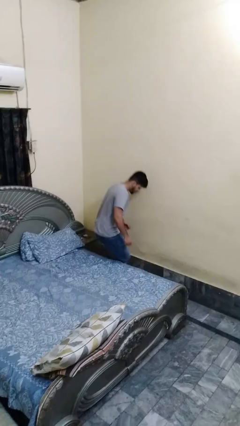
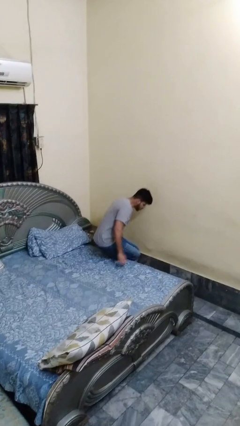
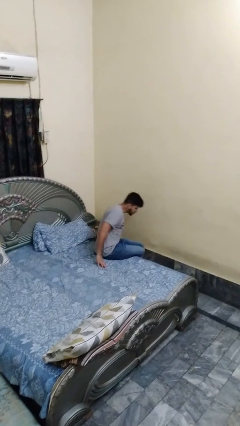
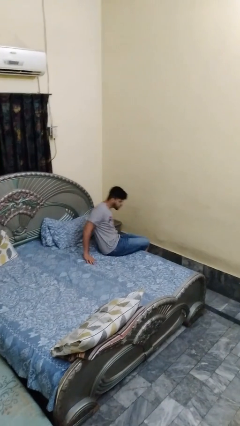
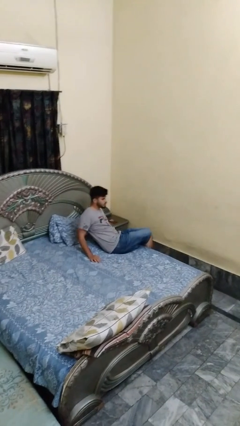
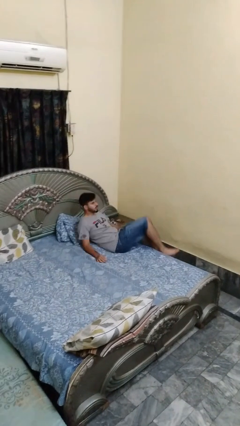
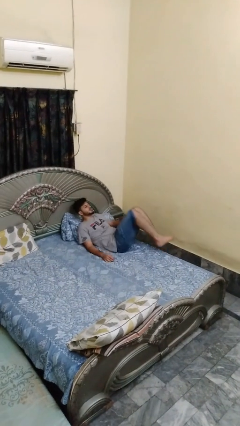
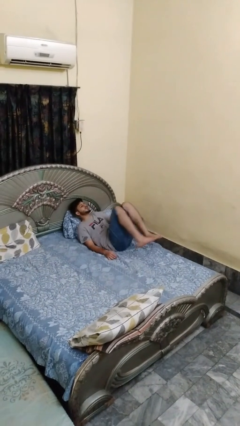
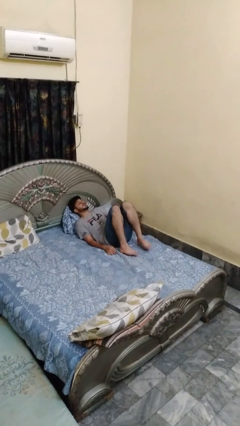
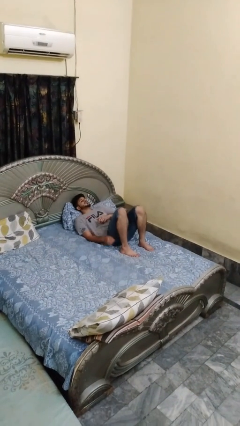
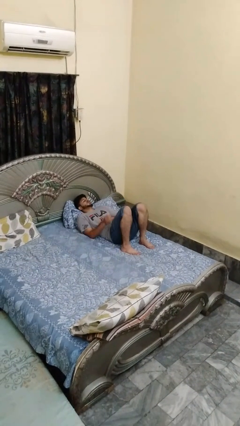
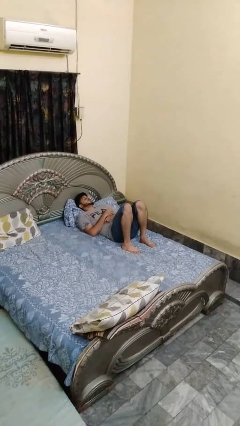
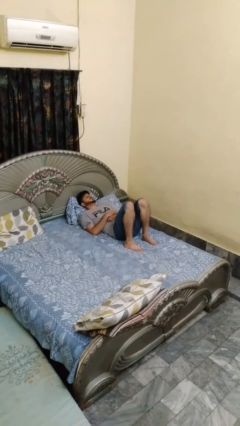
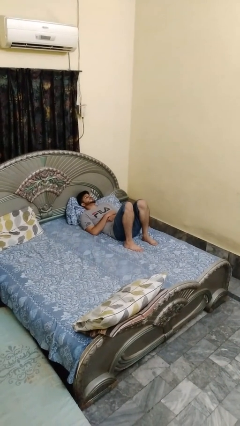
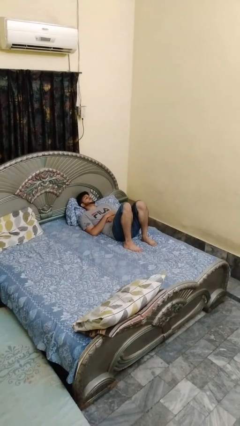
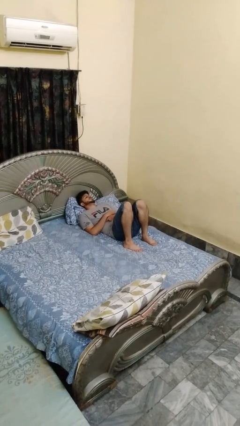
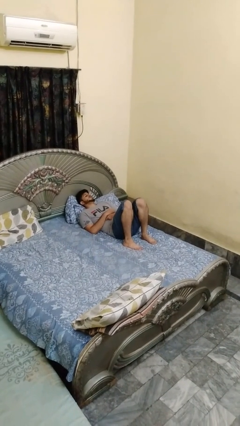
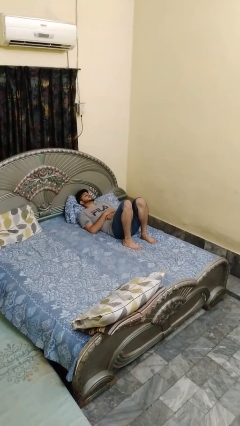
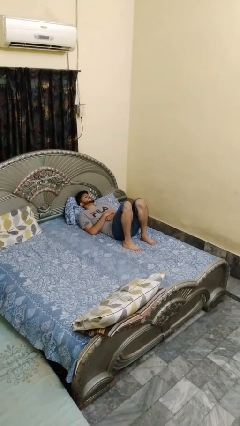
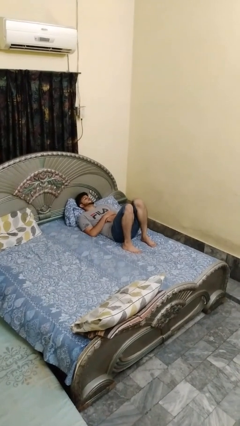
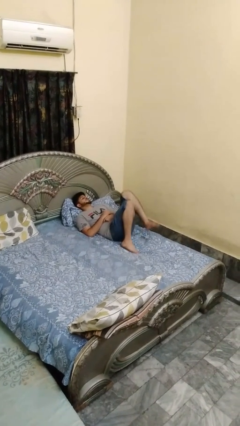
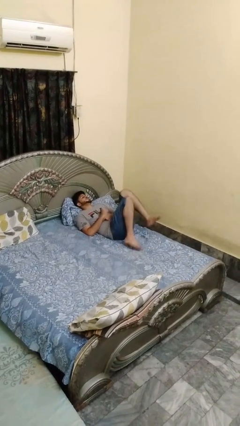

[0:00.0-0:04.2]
person lies down on bed

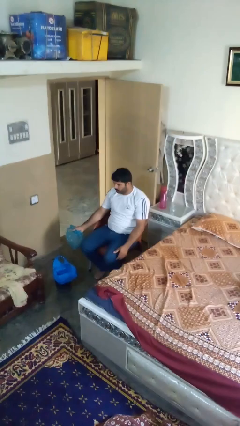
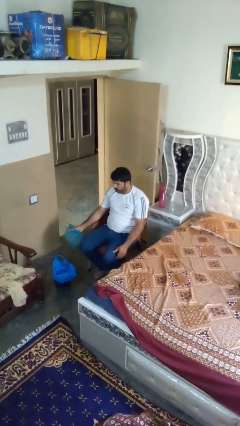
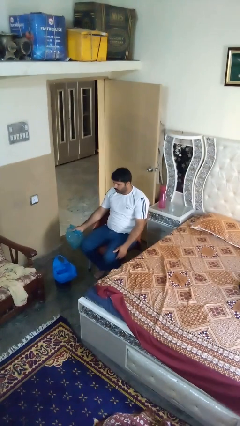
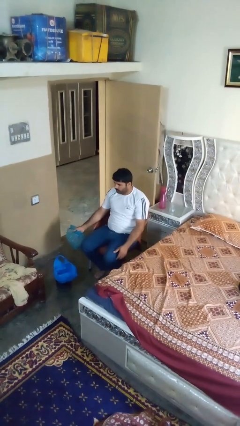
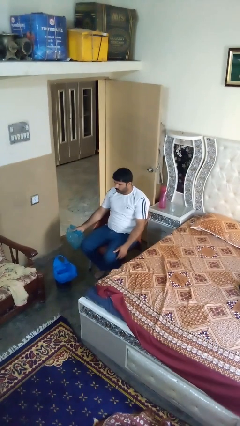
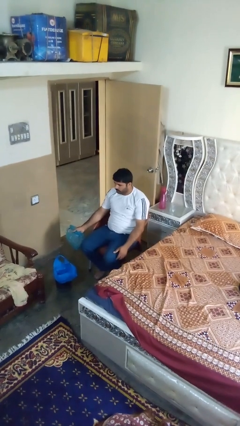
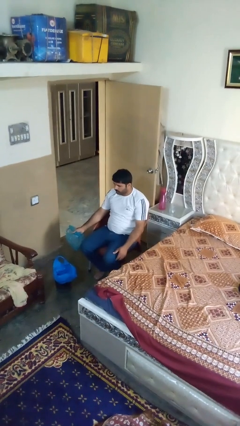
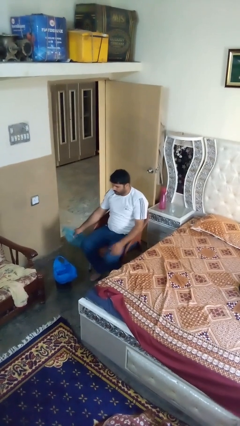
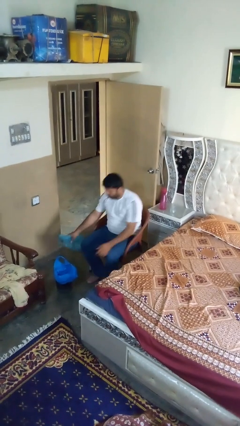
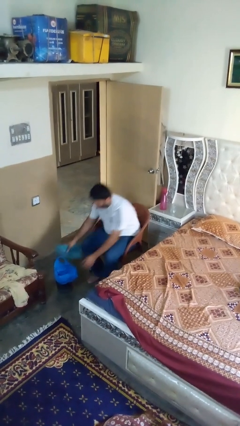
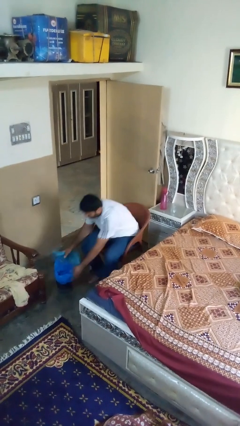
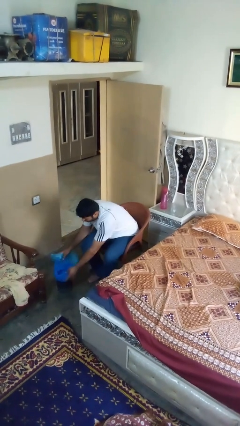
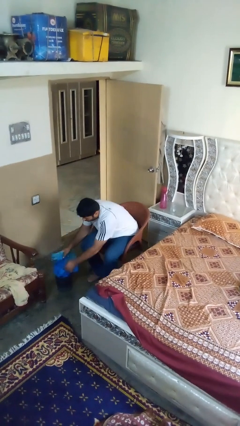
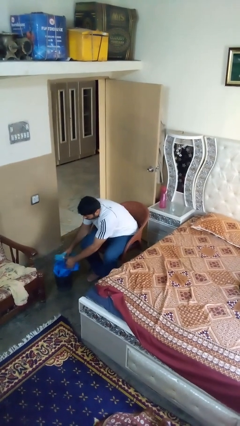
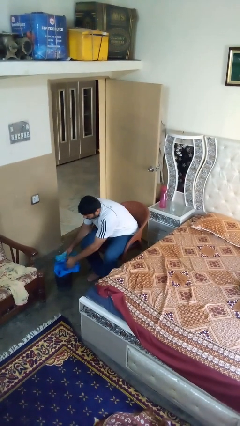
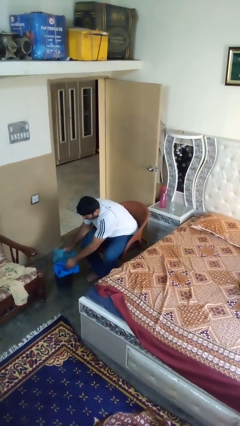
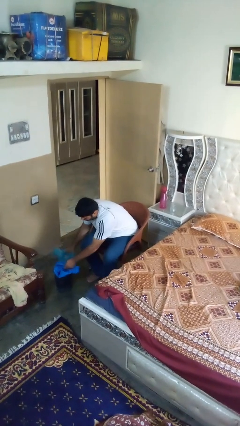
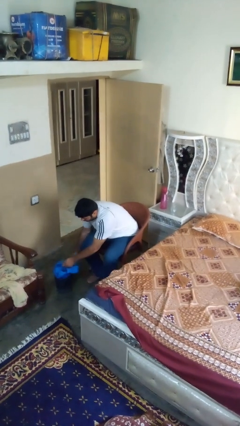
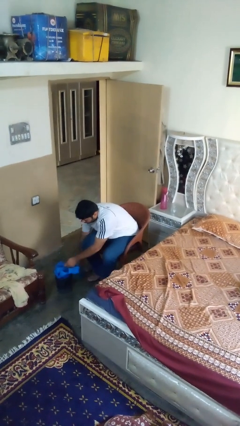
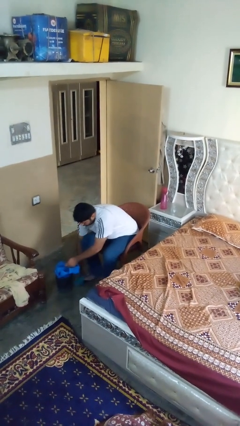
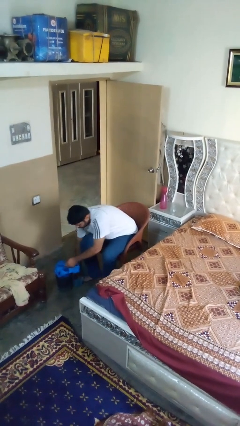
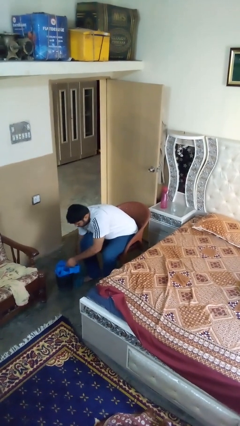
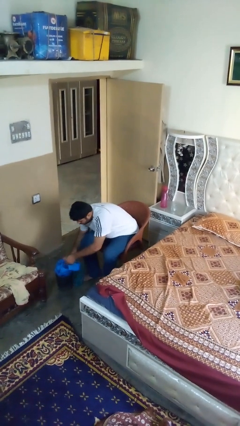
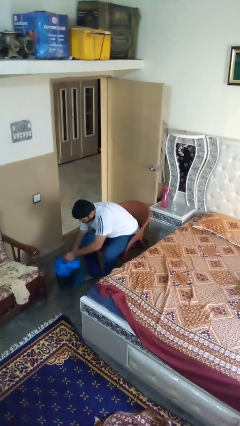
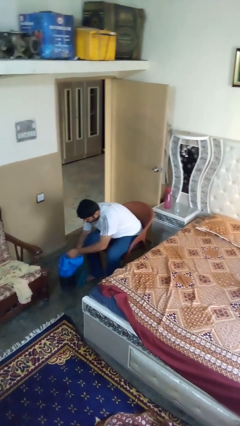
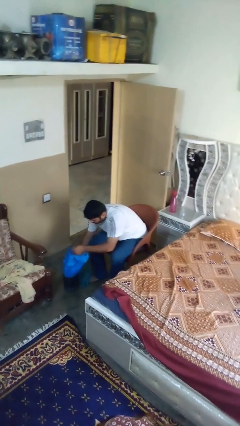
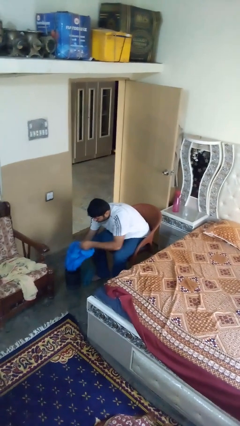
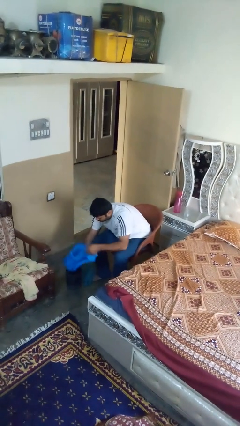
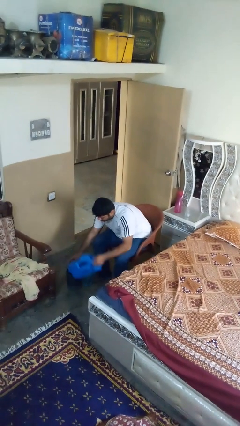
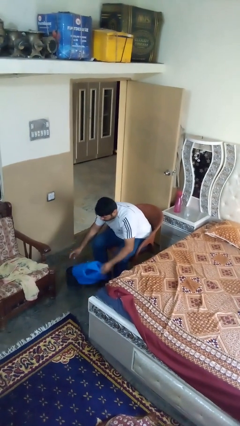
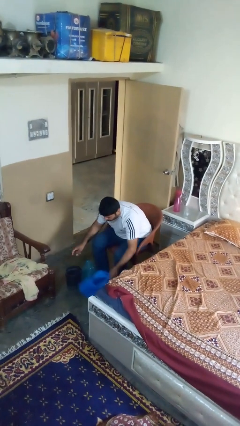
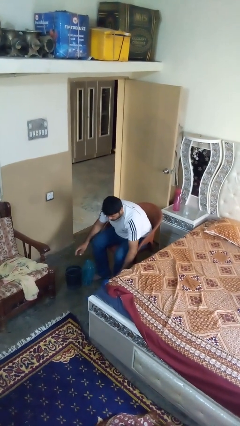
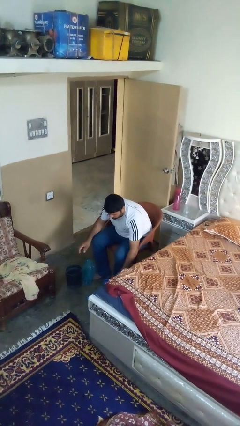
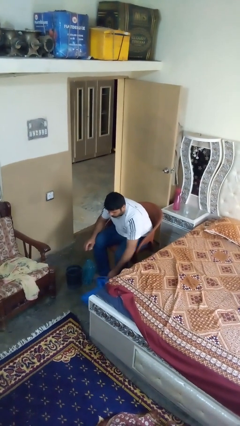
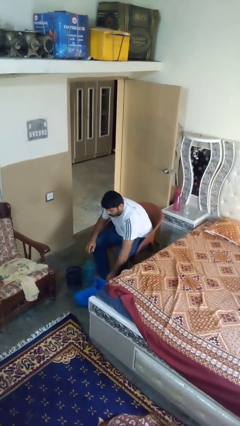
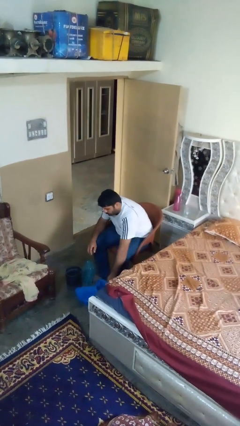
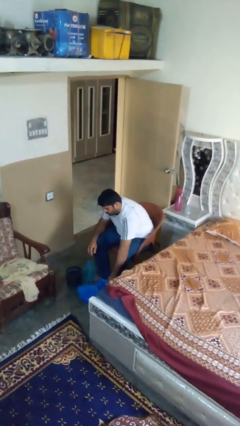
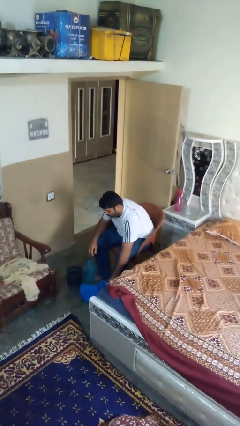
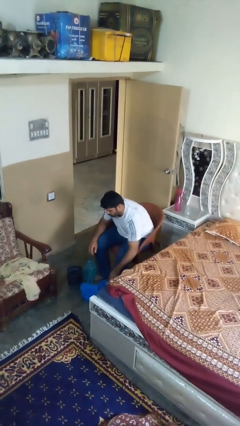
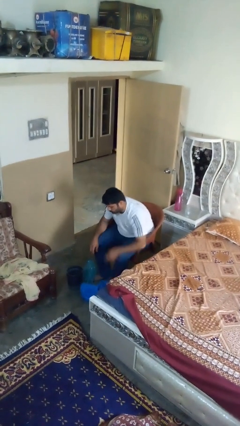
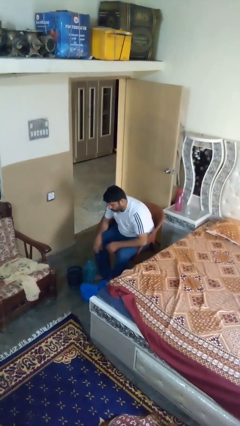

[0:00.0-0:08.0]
person removes trashbag from trashcan

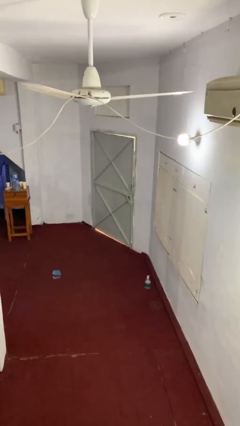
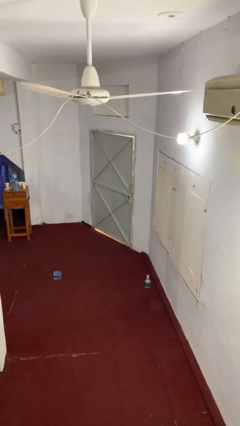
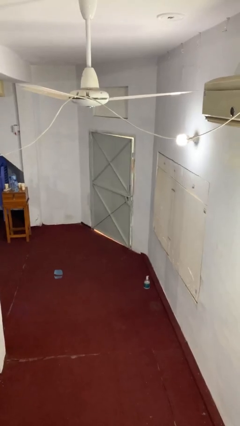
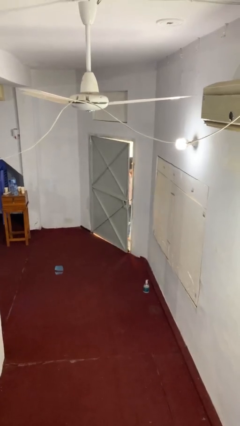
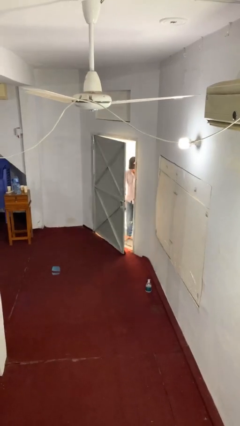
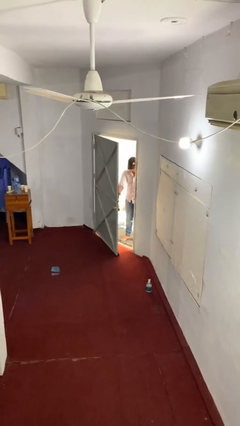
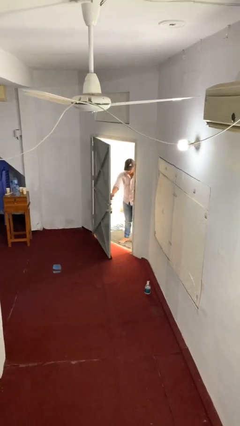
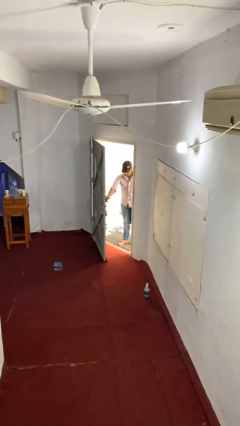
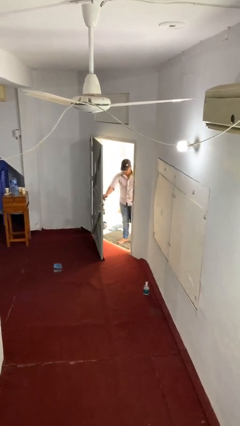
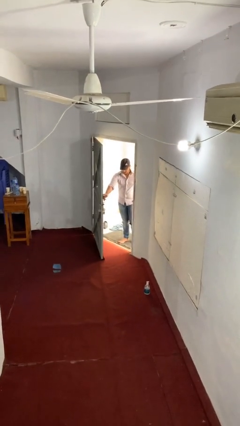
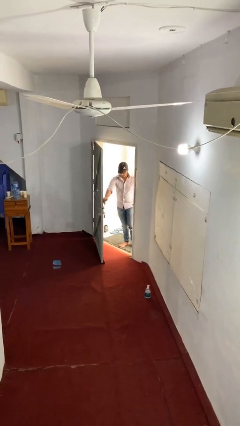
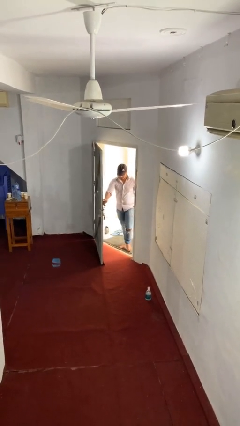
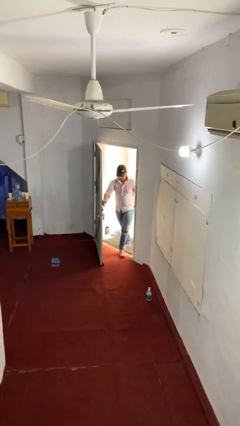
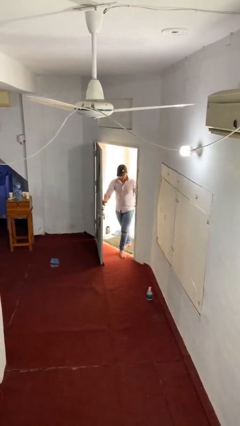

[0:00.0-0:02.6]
person opens facility door

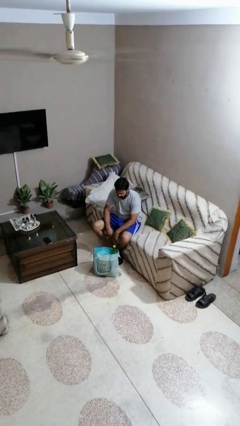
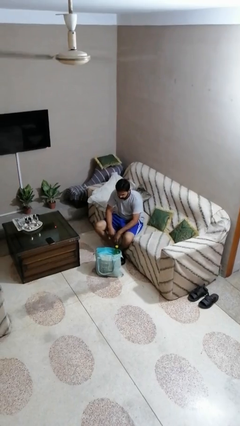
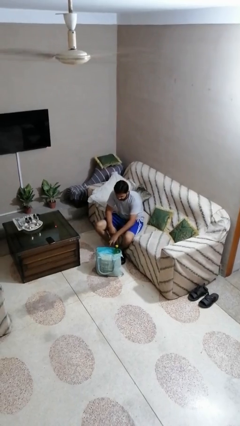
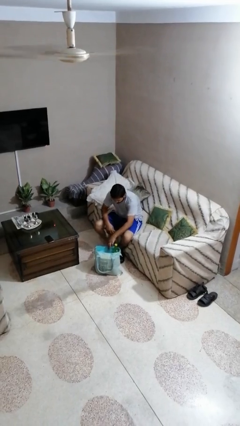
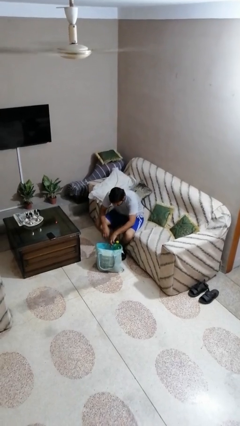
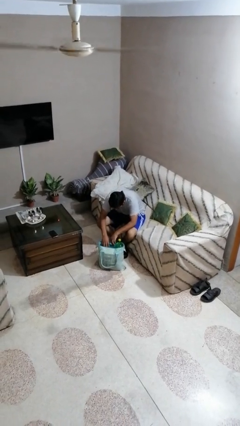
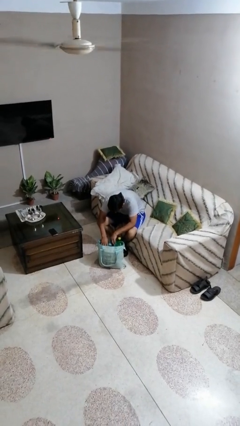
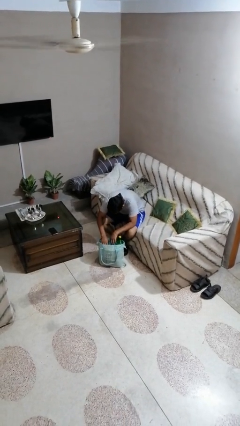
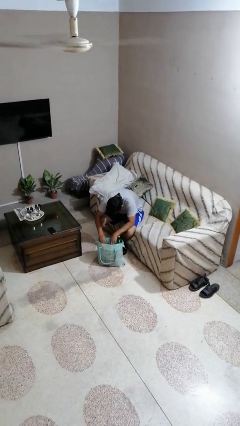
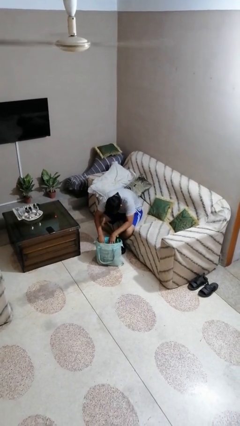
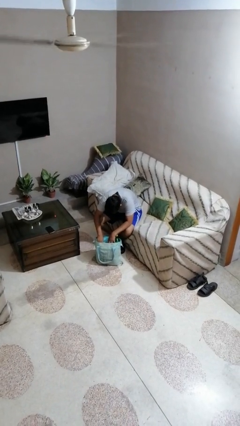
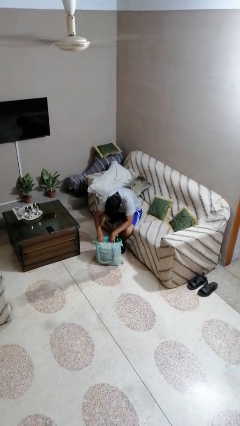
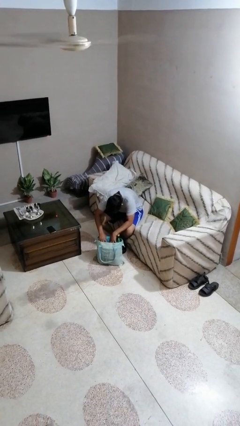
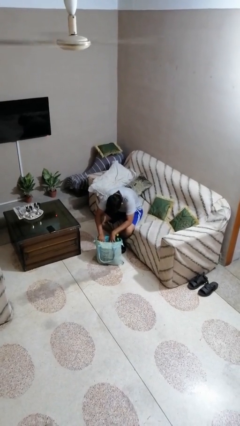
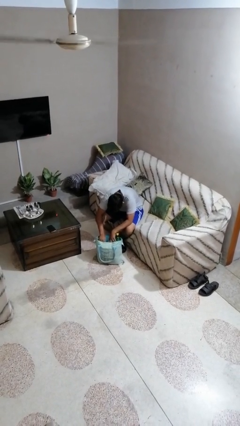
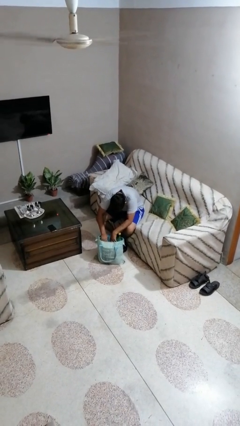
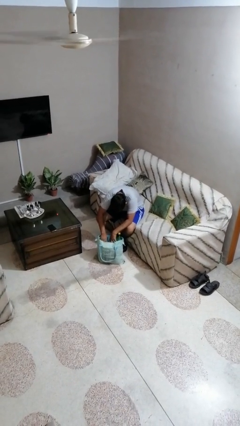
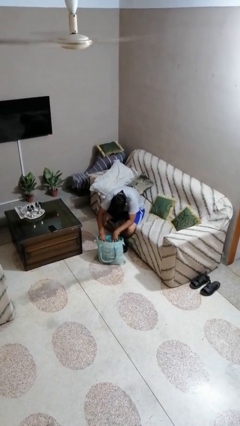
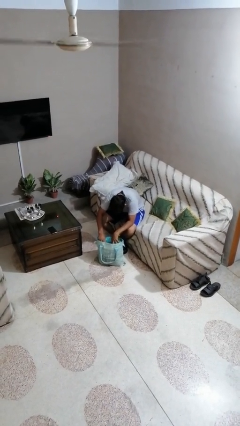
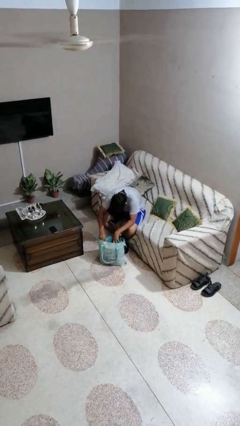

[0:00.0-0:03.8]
person searches in bag
